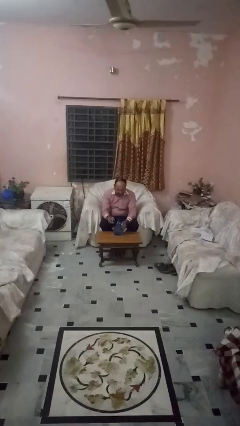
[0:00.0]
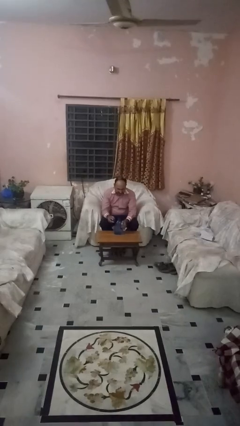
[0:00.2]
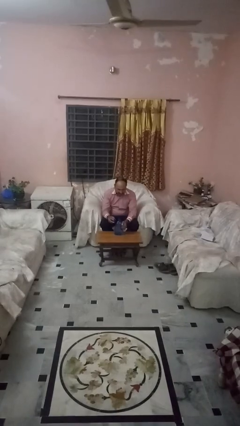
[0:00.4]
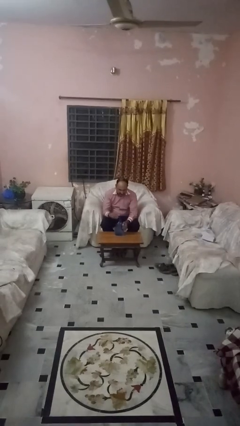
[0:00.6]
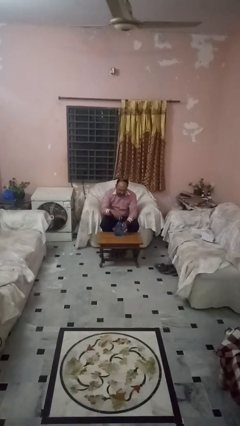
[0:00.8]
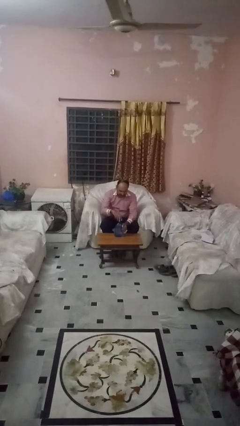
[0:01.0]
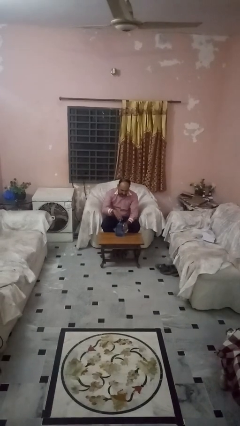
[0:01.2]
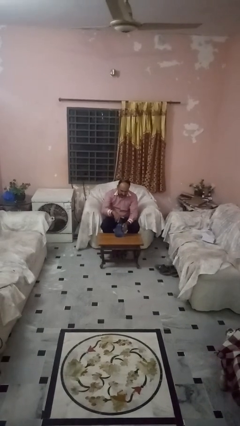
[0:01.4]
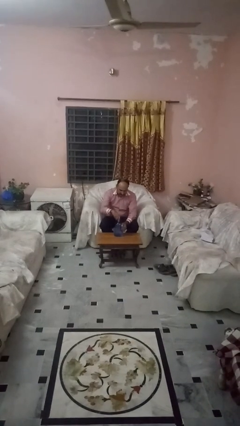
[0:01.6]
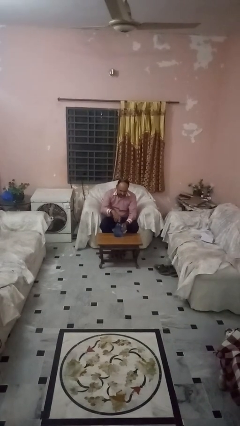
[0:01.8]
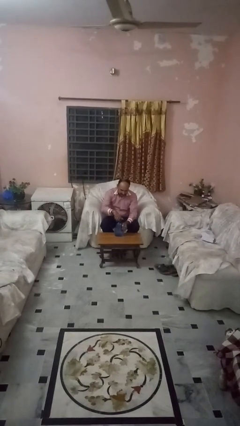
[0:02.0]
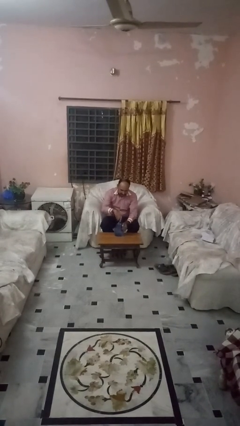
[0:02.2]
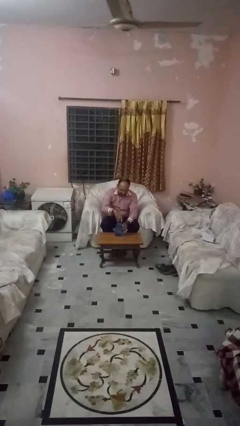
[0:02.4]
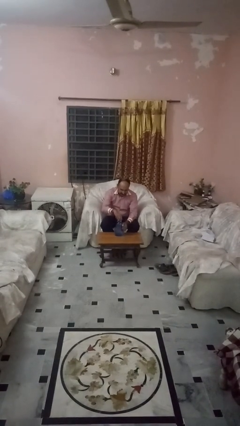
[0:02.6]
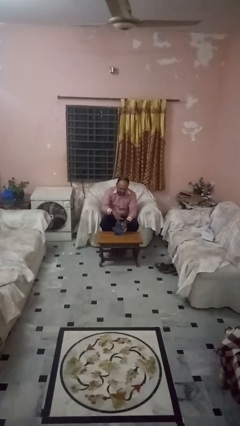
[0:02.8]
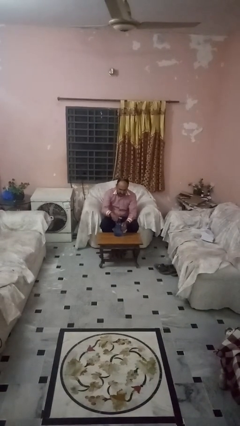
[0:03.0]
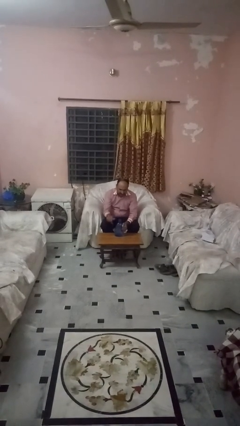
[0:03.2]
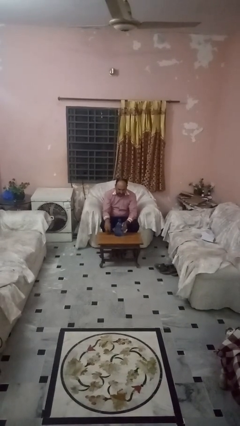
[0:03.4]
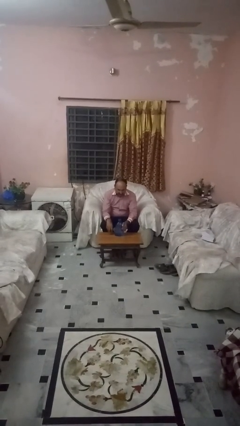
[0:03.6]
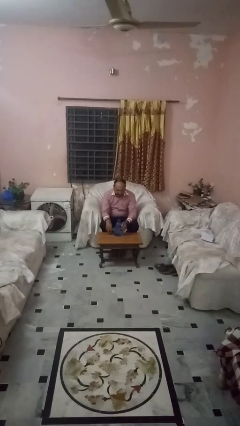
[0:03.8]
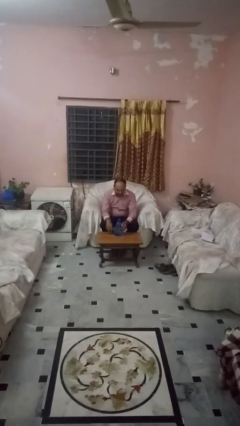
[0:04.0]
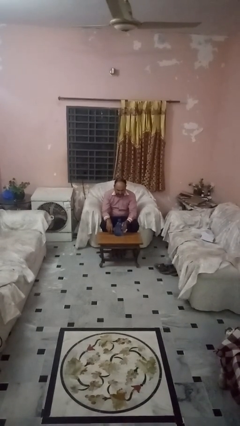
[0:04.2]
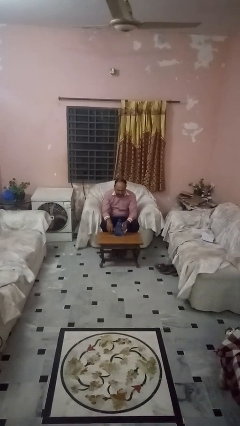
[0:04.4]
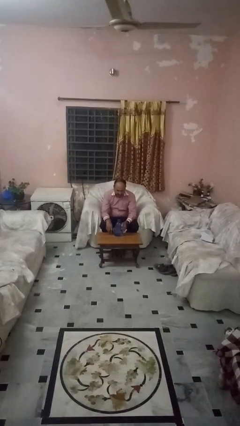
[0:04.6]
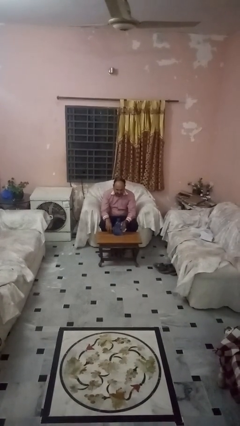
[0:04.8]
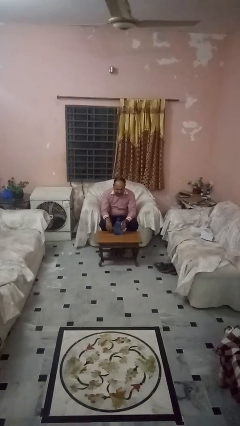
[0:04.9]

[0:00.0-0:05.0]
person screws lid to bottle

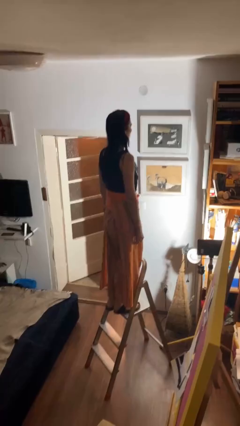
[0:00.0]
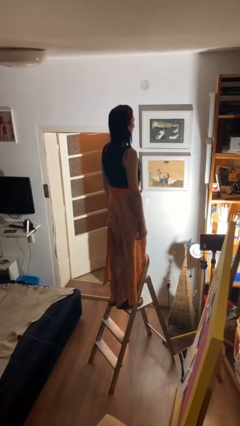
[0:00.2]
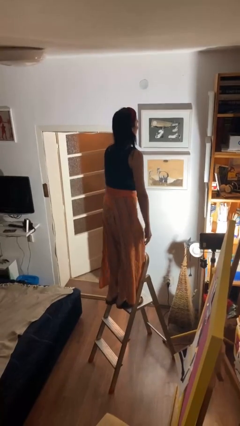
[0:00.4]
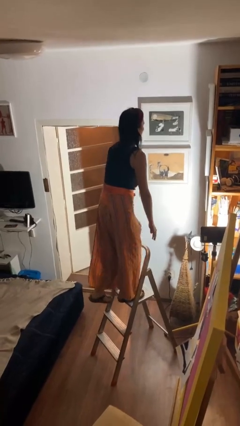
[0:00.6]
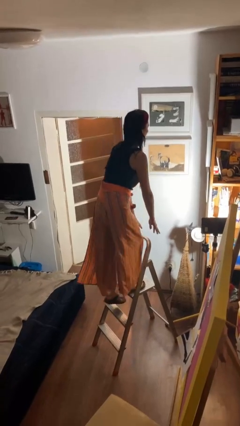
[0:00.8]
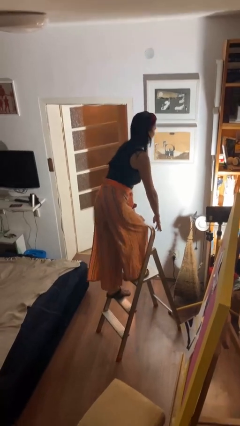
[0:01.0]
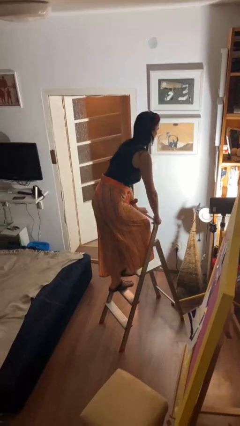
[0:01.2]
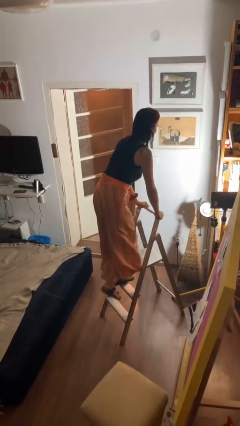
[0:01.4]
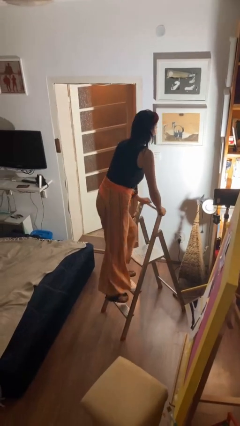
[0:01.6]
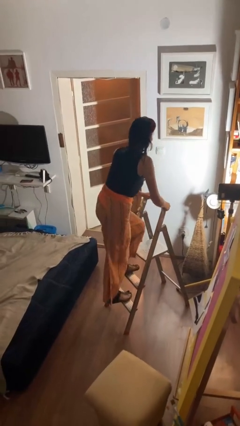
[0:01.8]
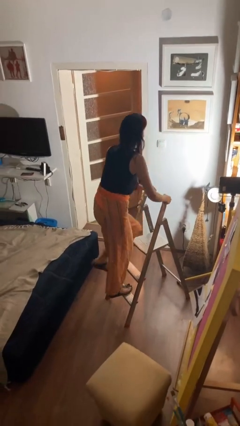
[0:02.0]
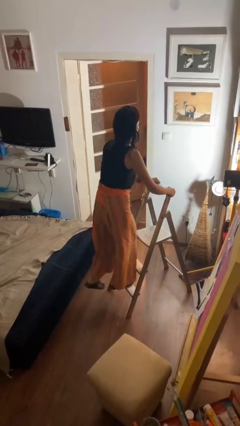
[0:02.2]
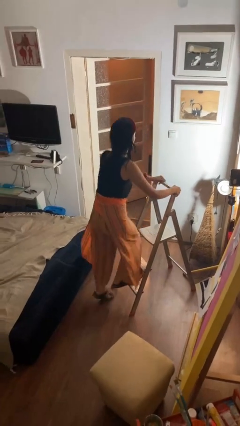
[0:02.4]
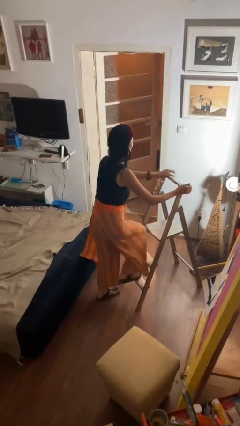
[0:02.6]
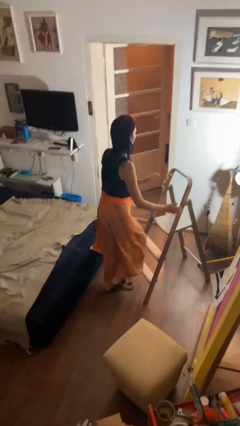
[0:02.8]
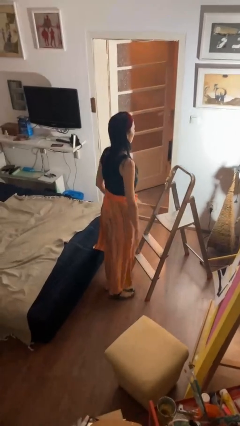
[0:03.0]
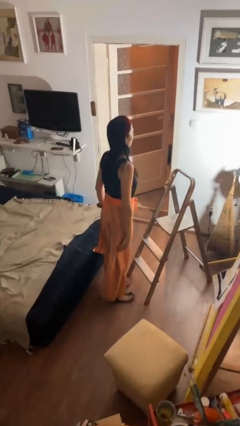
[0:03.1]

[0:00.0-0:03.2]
person climbs down ladder

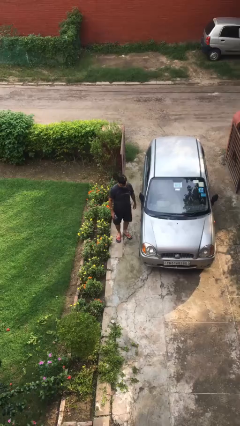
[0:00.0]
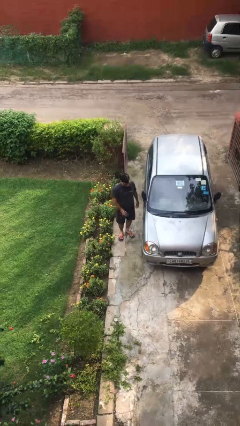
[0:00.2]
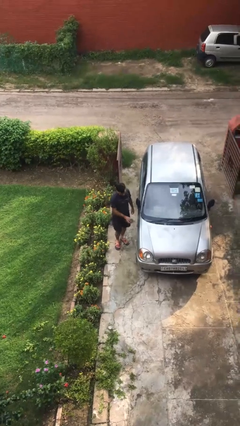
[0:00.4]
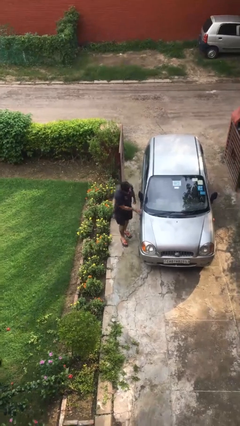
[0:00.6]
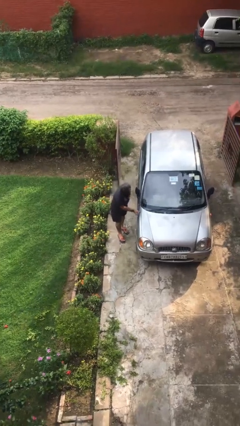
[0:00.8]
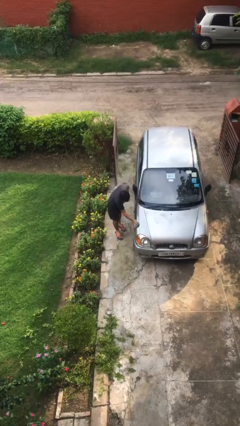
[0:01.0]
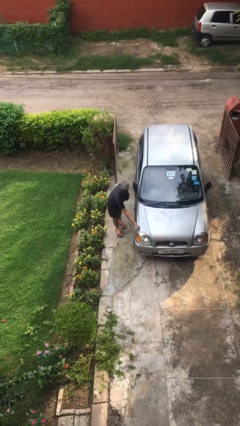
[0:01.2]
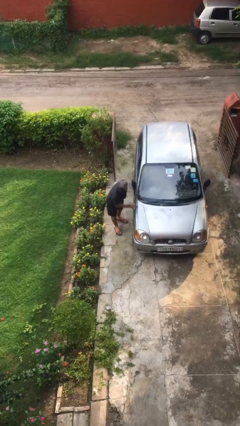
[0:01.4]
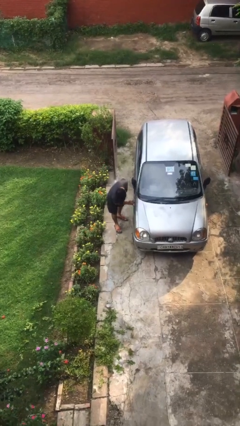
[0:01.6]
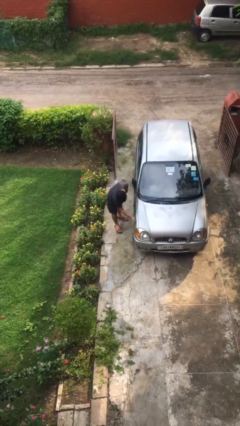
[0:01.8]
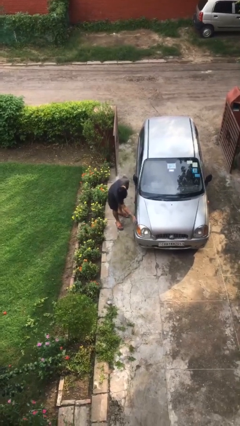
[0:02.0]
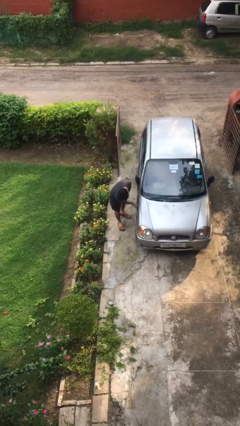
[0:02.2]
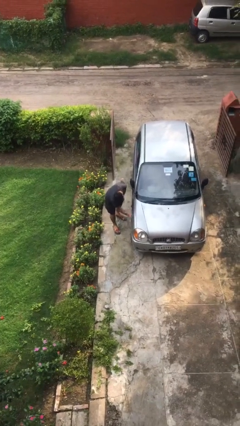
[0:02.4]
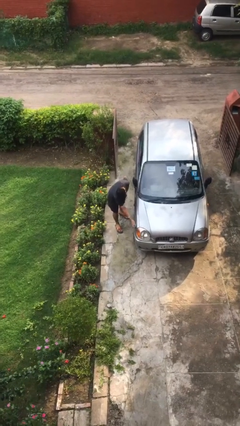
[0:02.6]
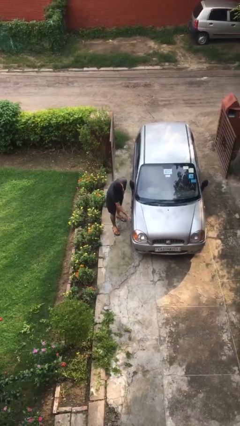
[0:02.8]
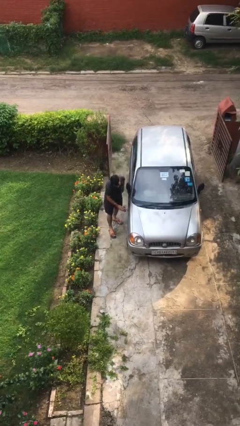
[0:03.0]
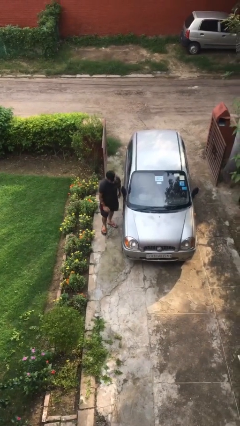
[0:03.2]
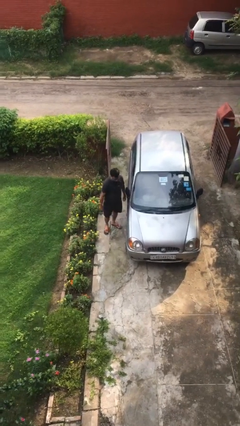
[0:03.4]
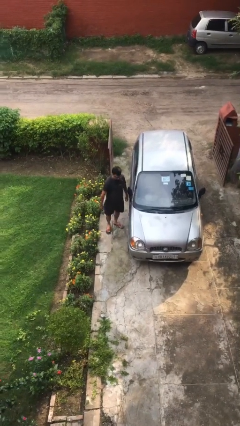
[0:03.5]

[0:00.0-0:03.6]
person polishes car with rag

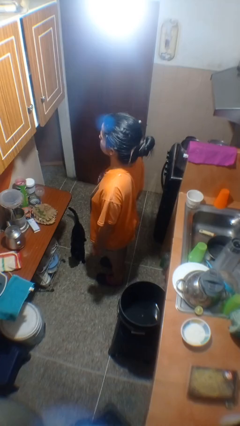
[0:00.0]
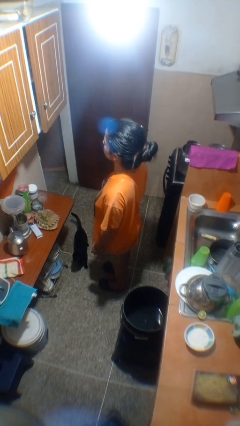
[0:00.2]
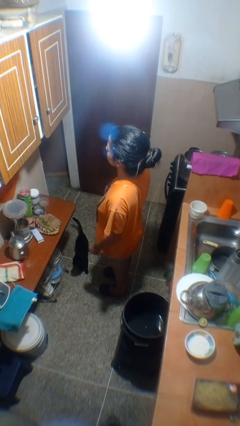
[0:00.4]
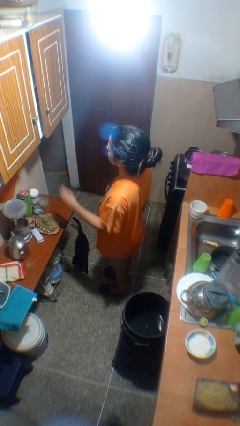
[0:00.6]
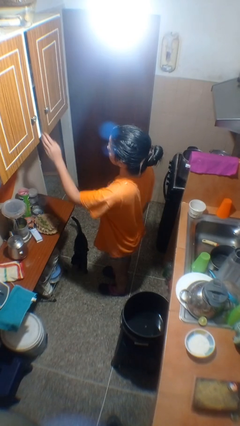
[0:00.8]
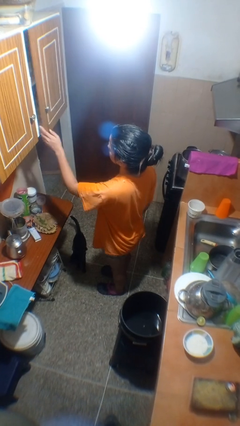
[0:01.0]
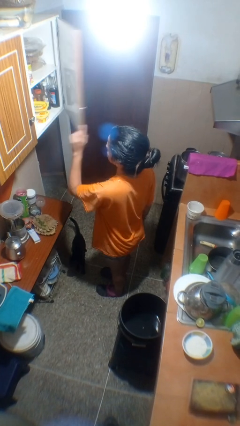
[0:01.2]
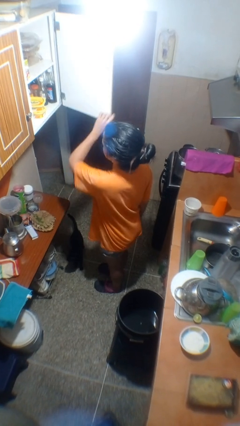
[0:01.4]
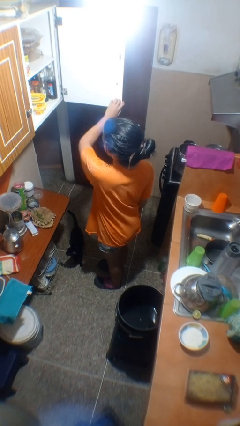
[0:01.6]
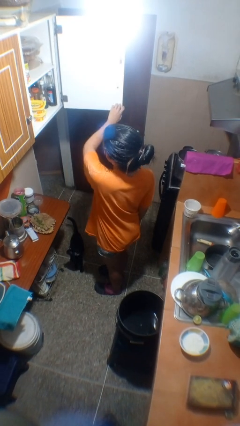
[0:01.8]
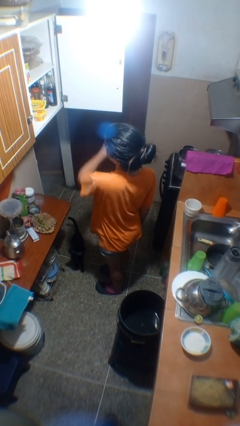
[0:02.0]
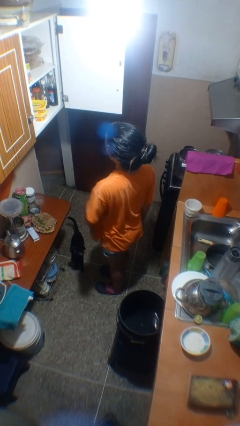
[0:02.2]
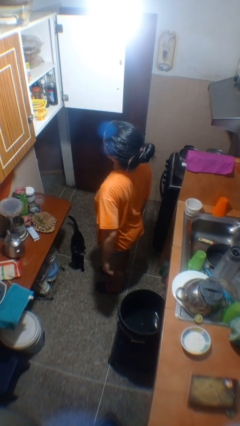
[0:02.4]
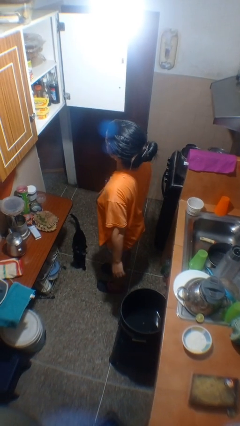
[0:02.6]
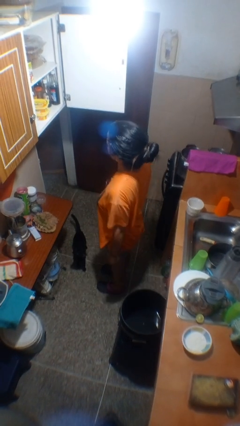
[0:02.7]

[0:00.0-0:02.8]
person opens cabinet

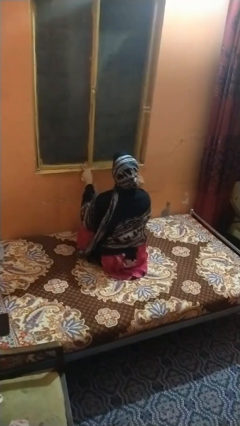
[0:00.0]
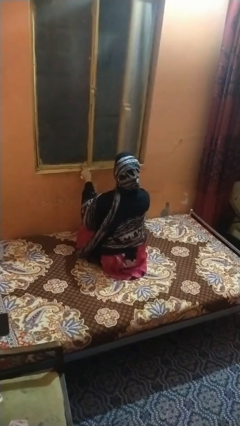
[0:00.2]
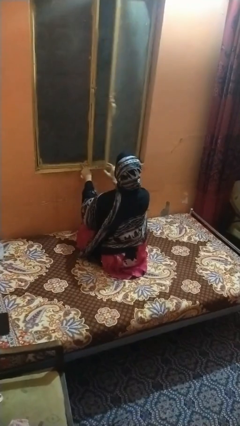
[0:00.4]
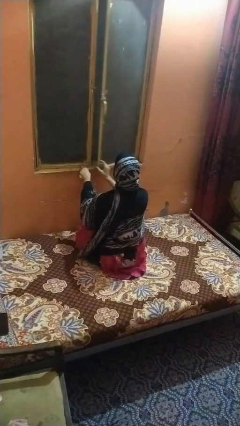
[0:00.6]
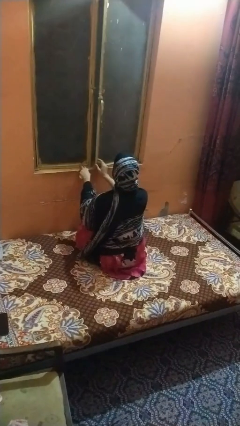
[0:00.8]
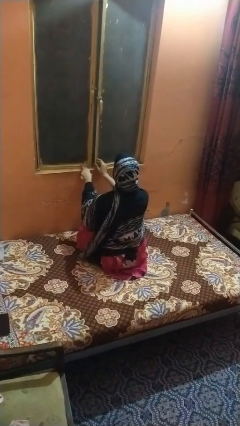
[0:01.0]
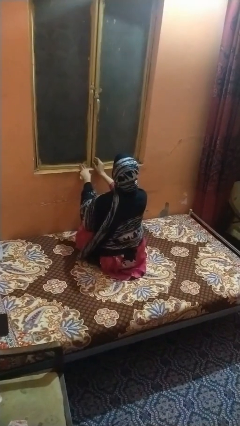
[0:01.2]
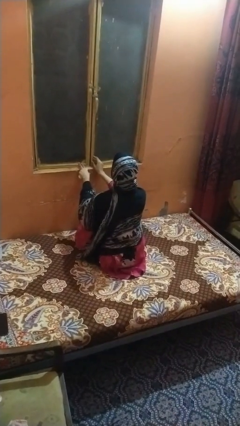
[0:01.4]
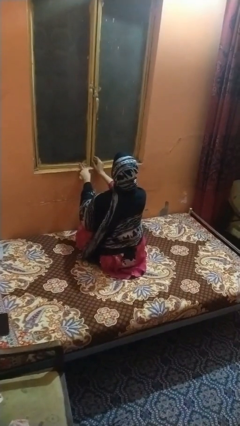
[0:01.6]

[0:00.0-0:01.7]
person closes home window

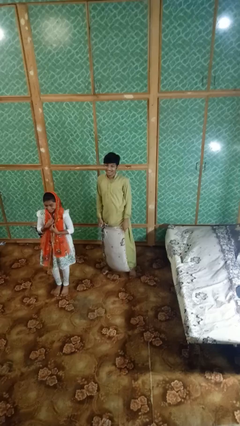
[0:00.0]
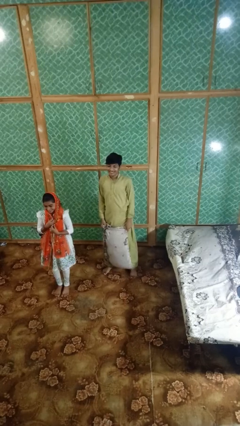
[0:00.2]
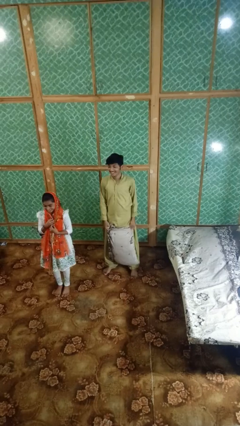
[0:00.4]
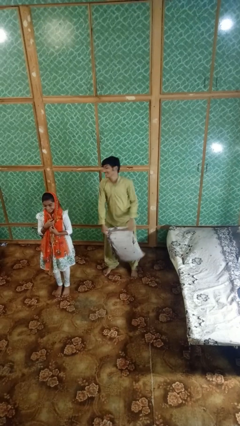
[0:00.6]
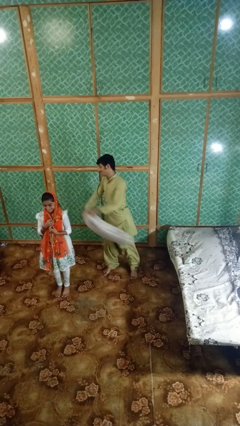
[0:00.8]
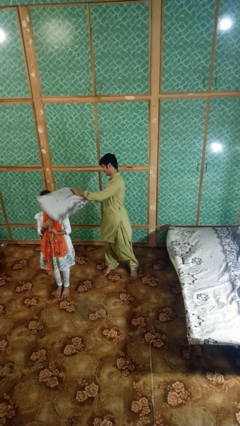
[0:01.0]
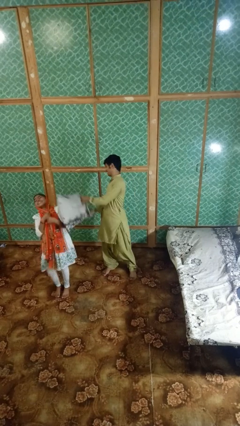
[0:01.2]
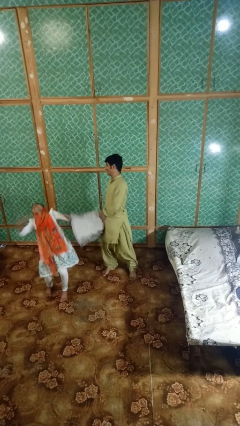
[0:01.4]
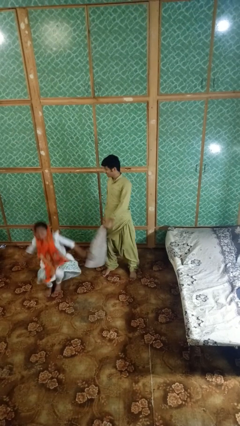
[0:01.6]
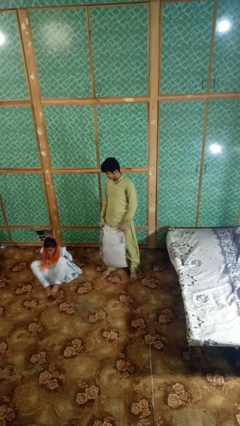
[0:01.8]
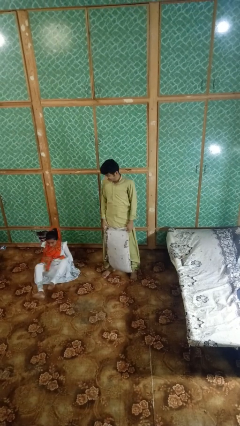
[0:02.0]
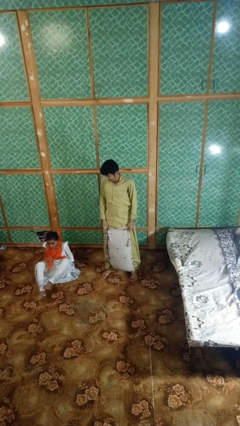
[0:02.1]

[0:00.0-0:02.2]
person hits person with pillow
